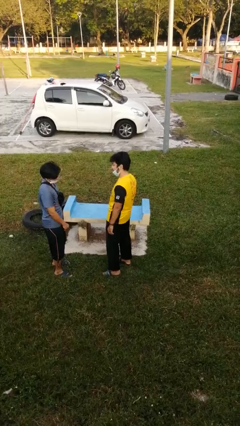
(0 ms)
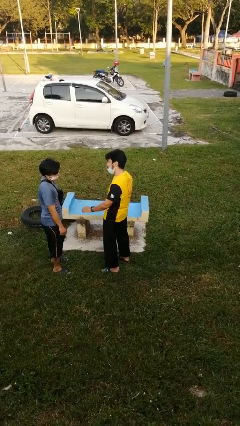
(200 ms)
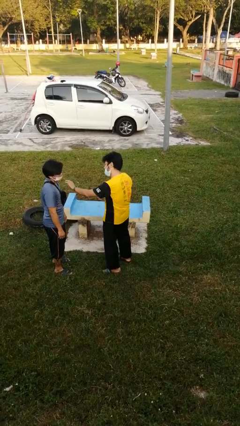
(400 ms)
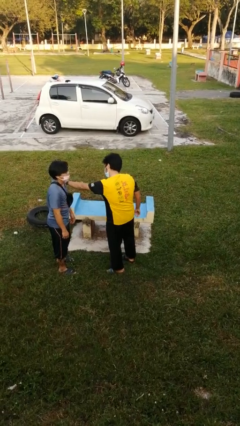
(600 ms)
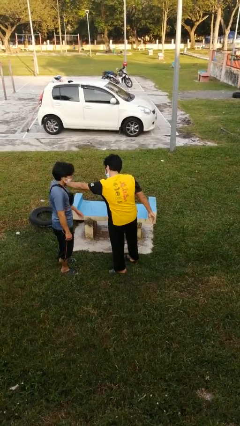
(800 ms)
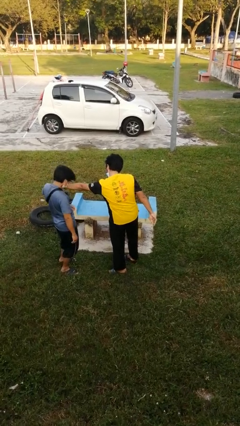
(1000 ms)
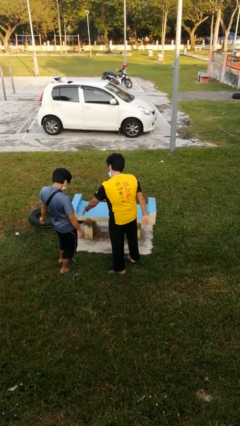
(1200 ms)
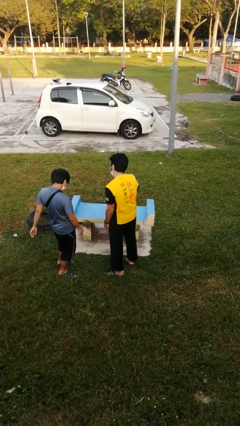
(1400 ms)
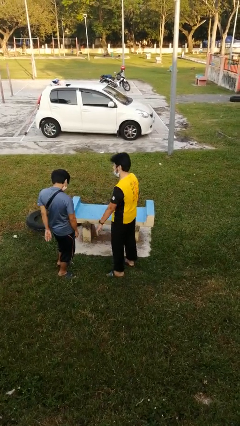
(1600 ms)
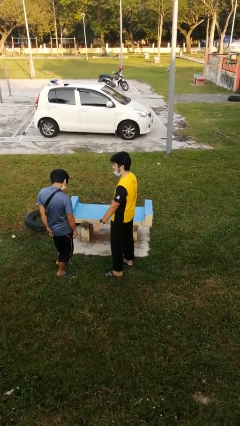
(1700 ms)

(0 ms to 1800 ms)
person shoves person

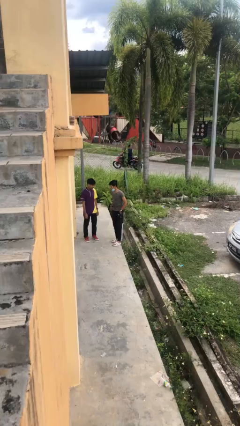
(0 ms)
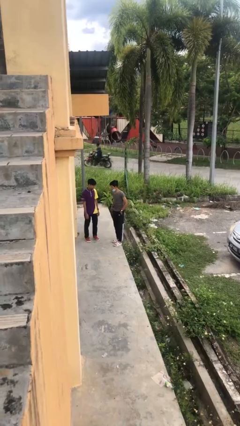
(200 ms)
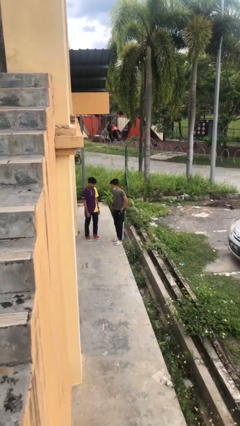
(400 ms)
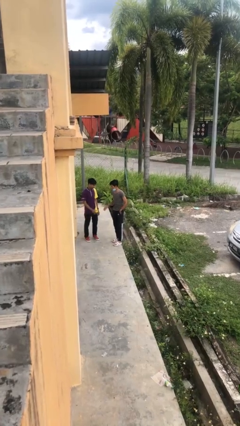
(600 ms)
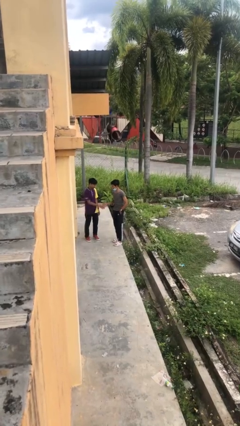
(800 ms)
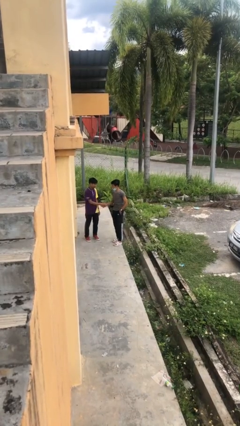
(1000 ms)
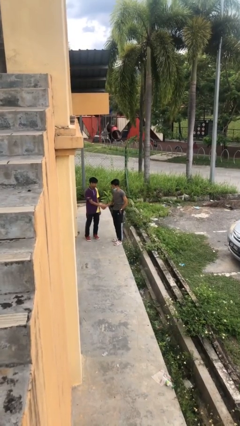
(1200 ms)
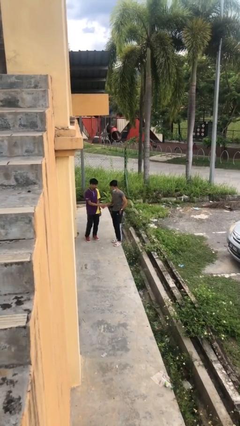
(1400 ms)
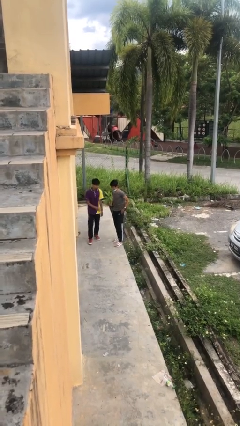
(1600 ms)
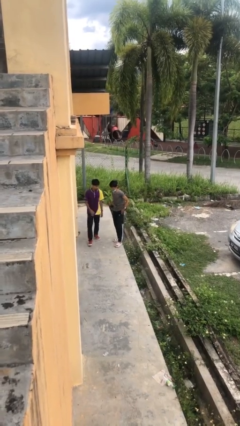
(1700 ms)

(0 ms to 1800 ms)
person shakes hand

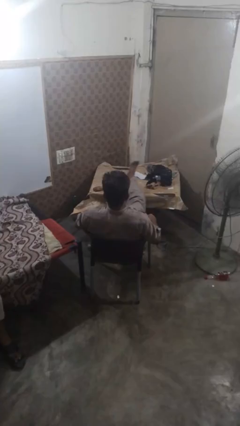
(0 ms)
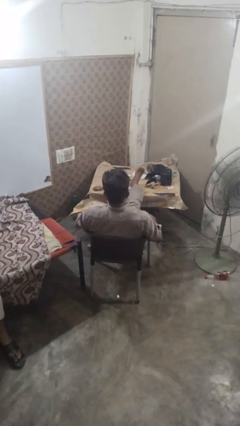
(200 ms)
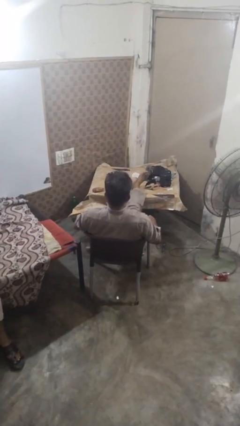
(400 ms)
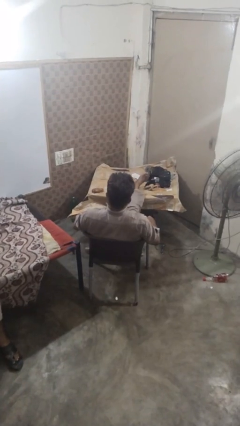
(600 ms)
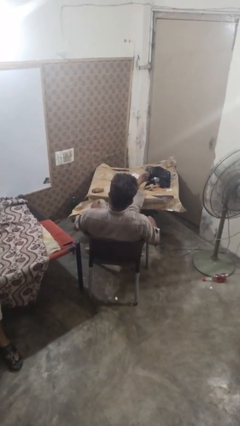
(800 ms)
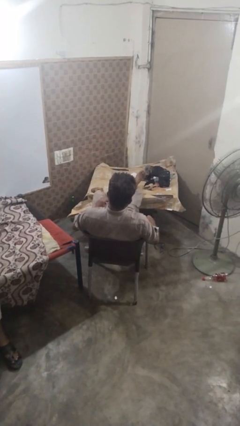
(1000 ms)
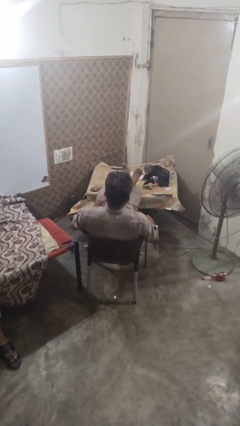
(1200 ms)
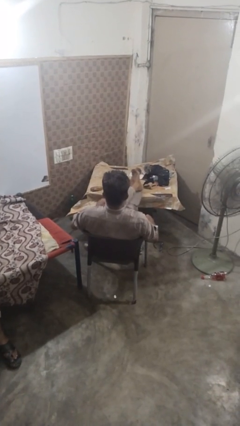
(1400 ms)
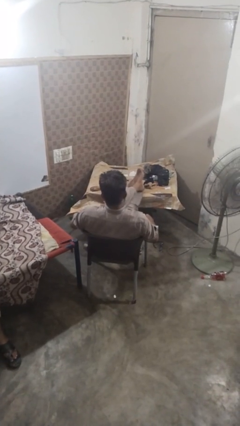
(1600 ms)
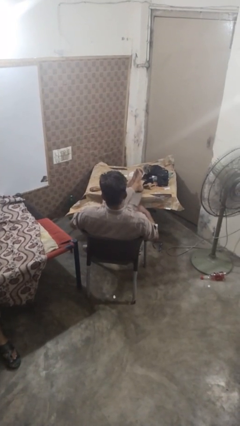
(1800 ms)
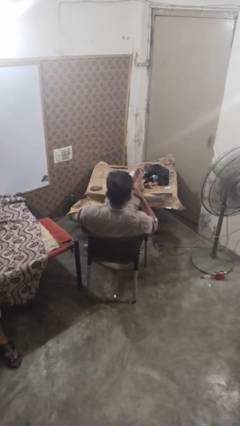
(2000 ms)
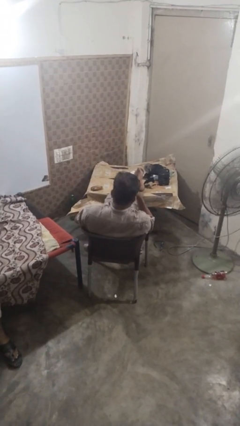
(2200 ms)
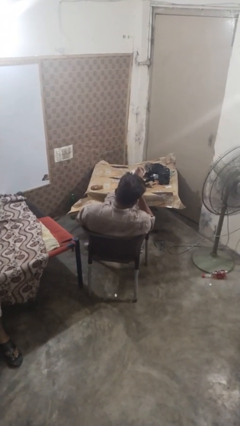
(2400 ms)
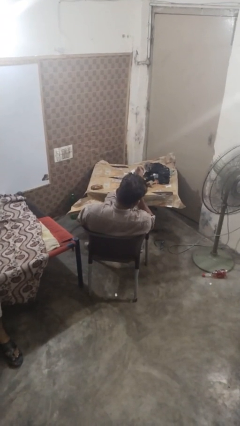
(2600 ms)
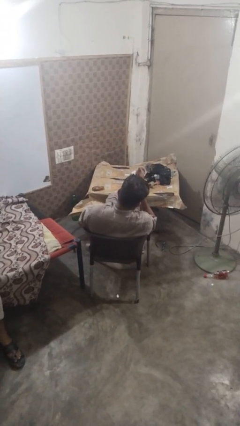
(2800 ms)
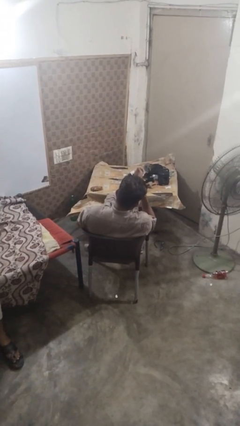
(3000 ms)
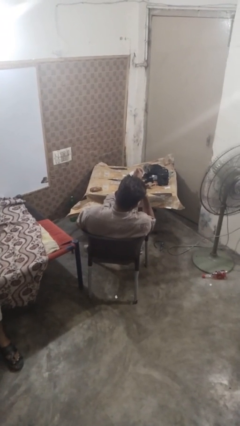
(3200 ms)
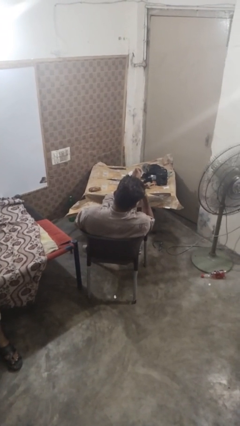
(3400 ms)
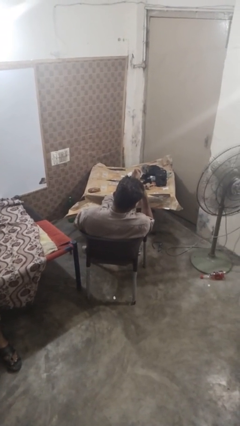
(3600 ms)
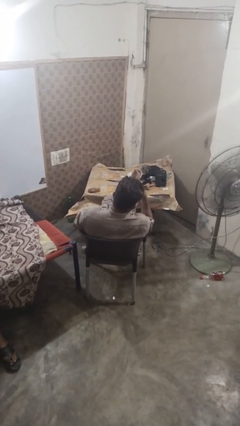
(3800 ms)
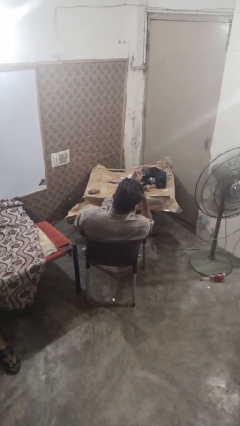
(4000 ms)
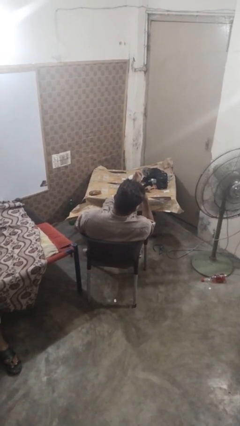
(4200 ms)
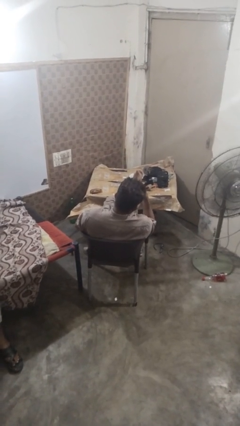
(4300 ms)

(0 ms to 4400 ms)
person puts feet up

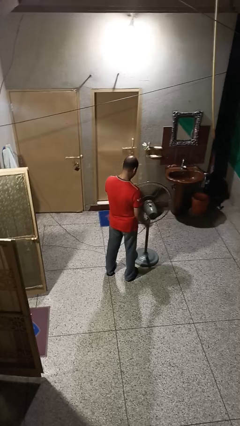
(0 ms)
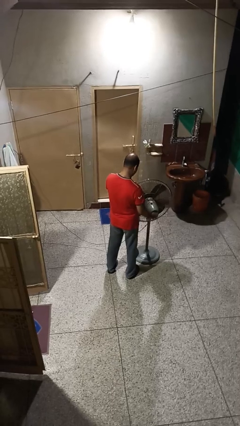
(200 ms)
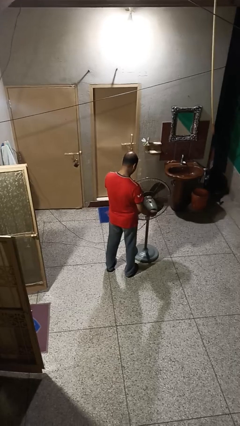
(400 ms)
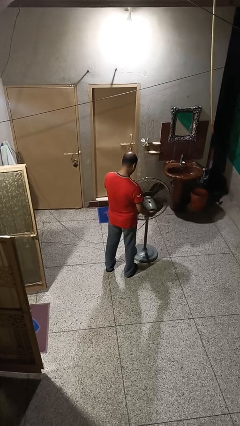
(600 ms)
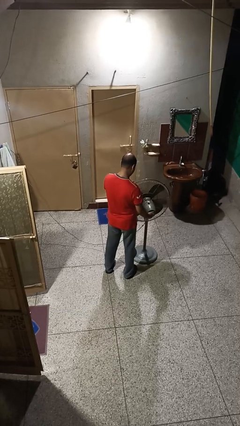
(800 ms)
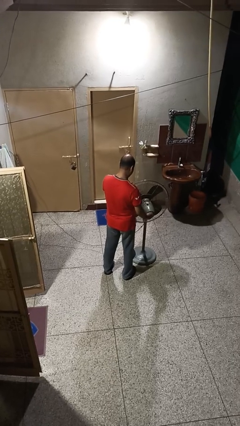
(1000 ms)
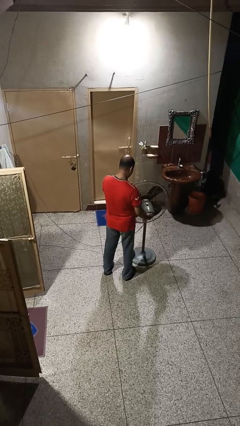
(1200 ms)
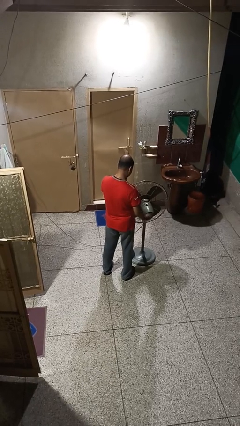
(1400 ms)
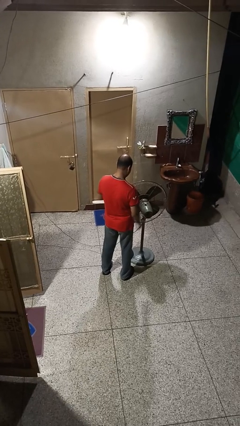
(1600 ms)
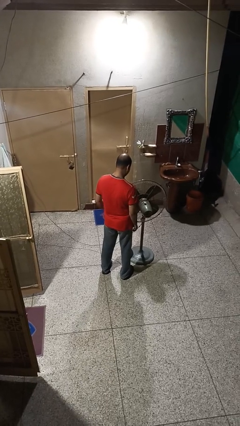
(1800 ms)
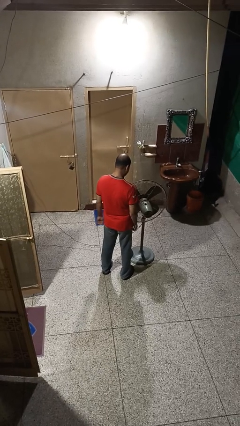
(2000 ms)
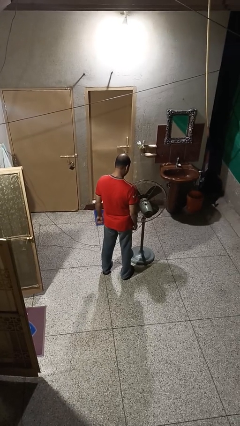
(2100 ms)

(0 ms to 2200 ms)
person turns off fan

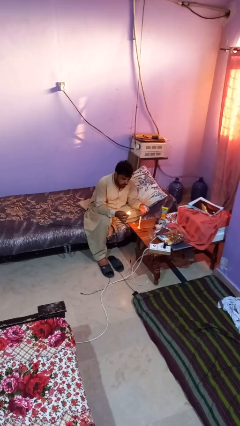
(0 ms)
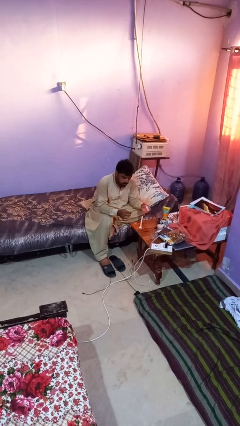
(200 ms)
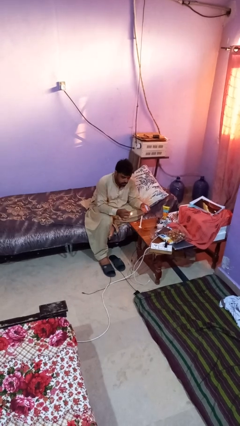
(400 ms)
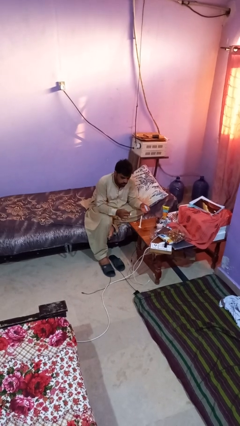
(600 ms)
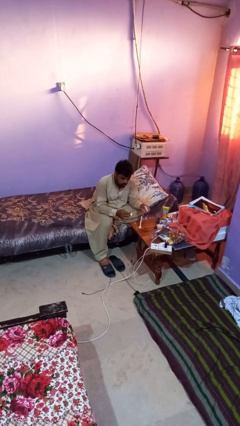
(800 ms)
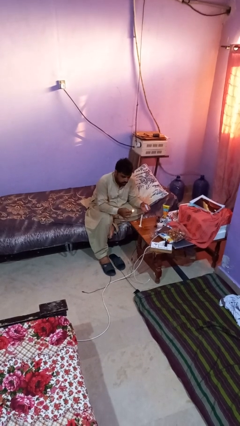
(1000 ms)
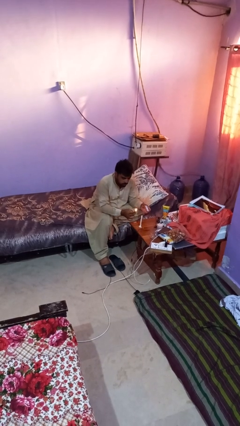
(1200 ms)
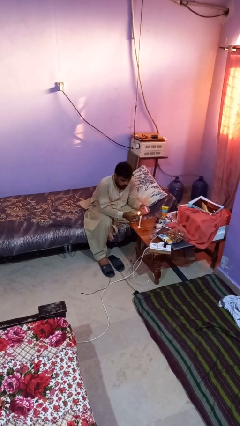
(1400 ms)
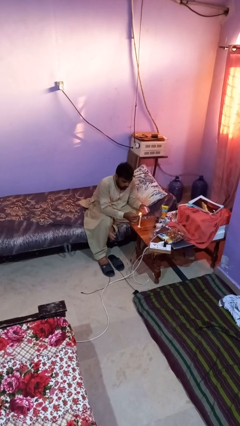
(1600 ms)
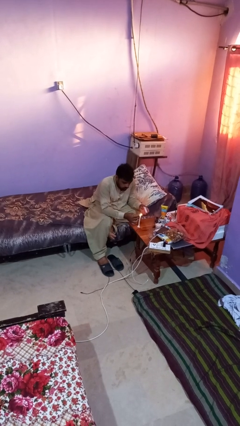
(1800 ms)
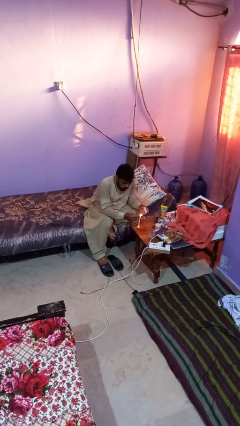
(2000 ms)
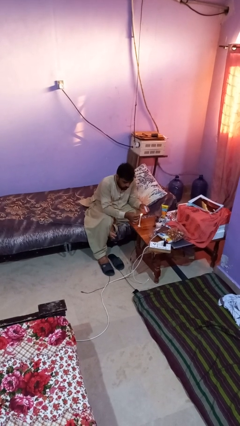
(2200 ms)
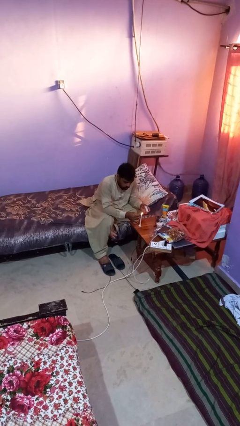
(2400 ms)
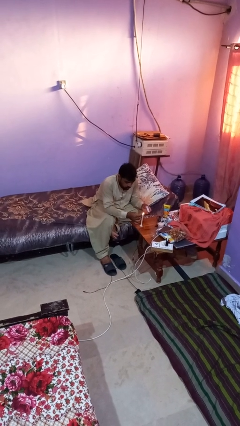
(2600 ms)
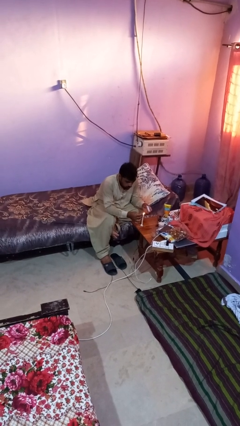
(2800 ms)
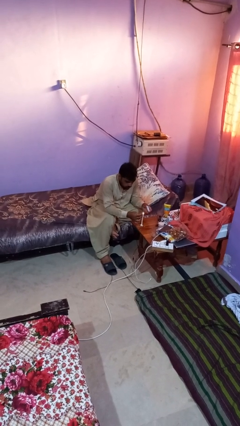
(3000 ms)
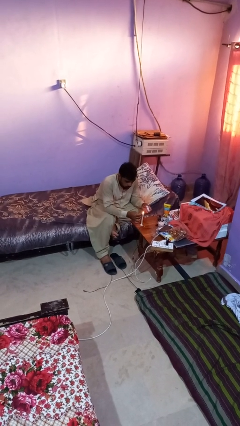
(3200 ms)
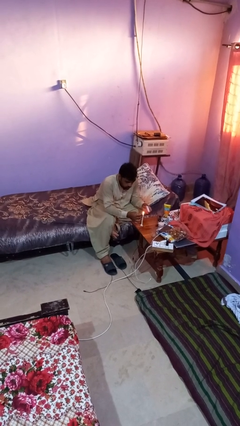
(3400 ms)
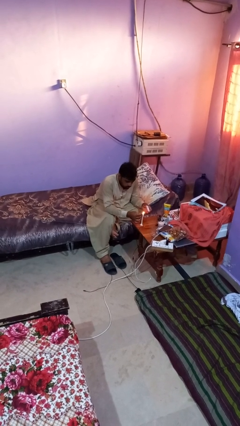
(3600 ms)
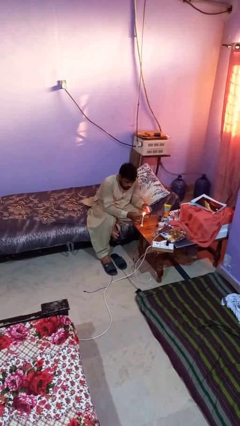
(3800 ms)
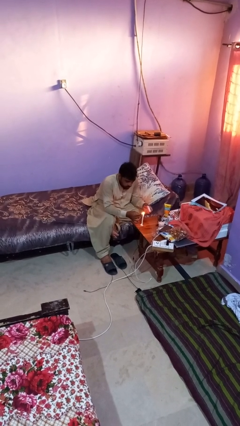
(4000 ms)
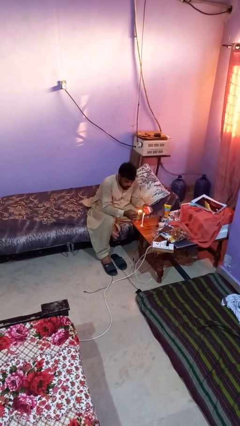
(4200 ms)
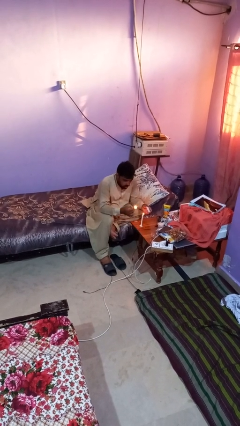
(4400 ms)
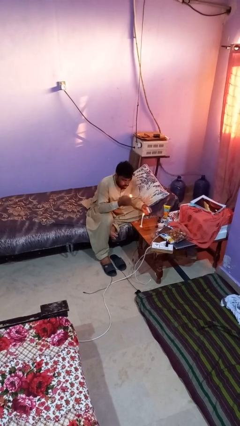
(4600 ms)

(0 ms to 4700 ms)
person lights candle

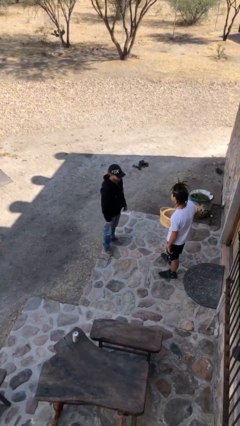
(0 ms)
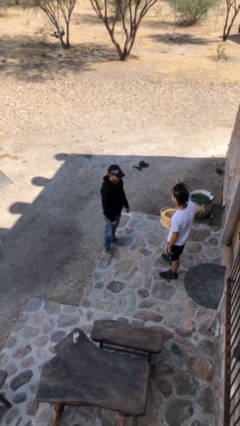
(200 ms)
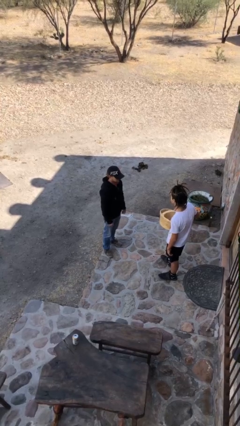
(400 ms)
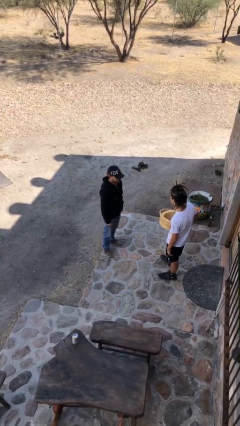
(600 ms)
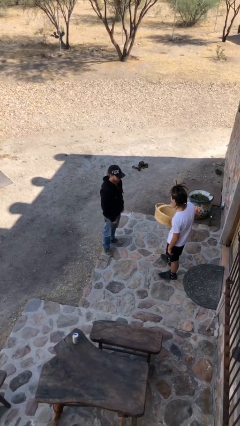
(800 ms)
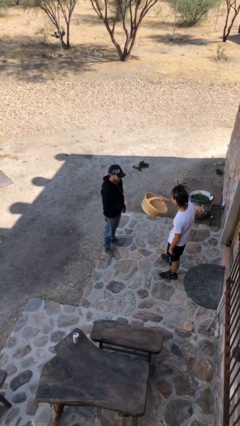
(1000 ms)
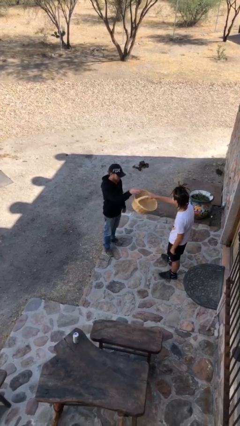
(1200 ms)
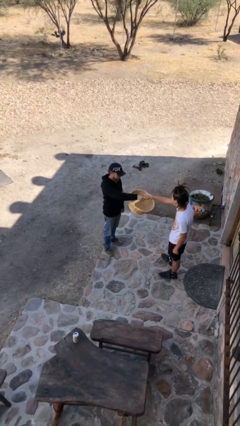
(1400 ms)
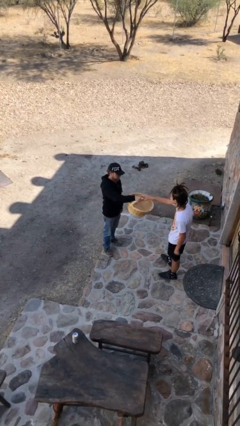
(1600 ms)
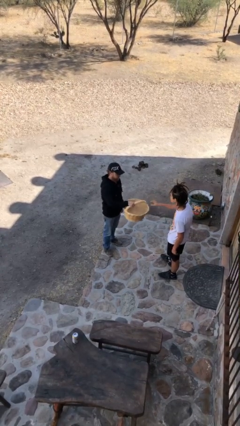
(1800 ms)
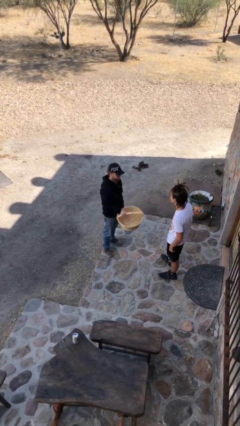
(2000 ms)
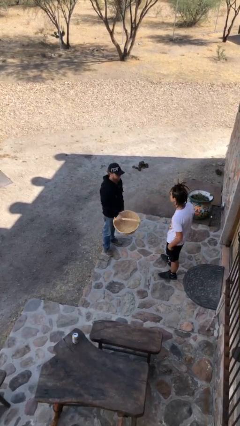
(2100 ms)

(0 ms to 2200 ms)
person transfers object to person

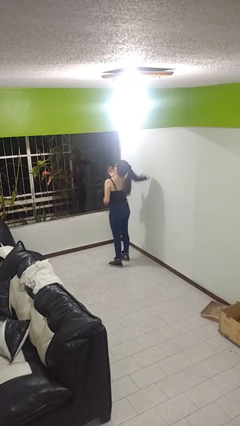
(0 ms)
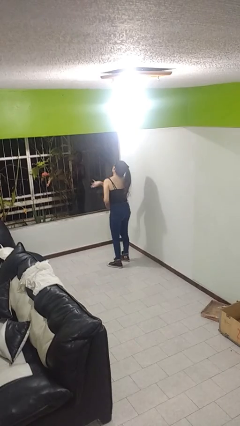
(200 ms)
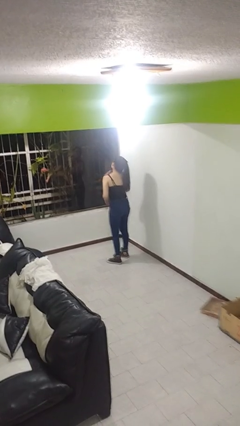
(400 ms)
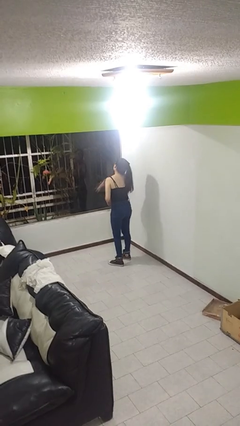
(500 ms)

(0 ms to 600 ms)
person swats bug
